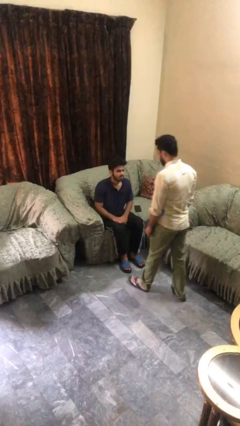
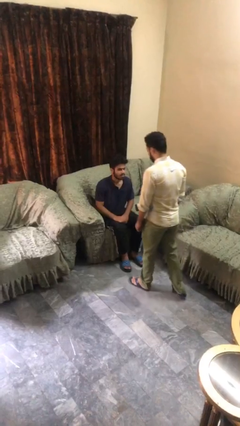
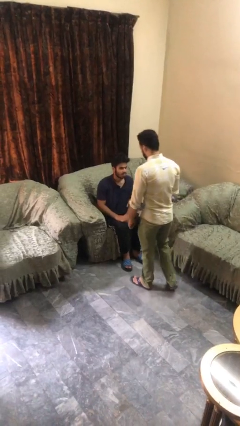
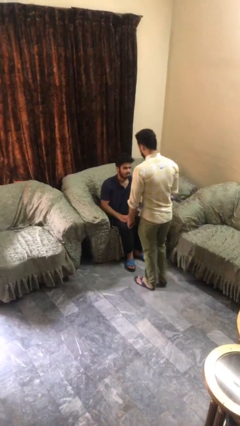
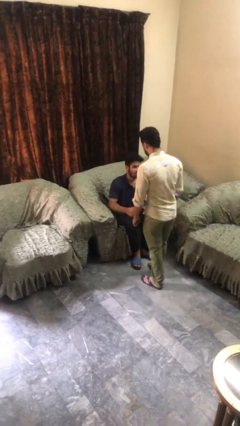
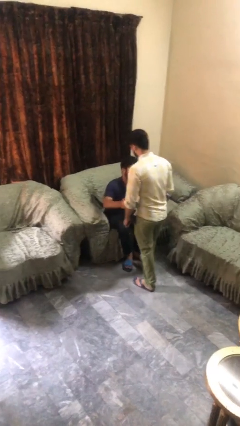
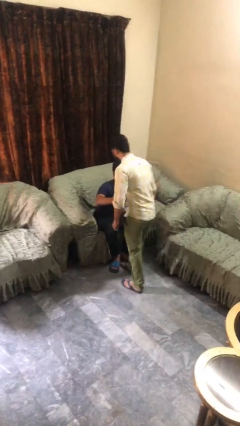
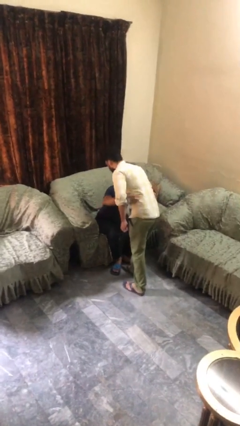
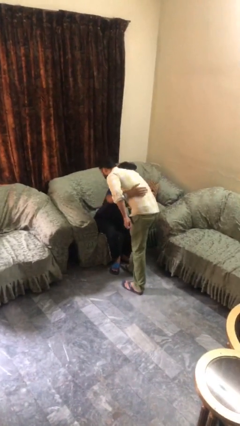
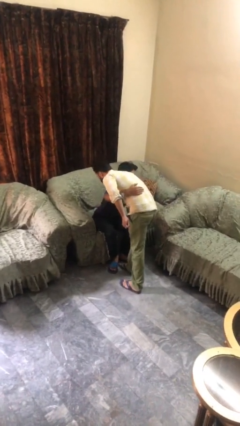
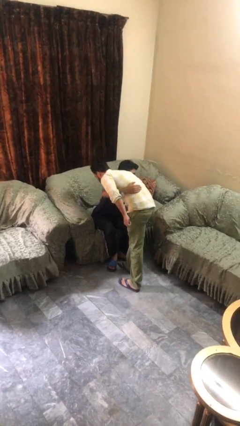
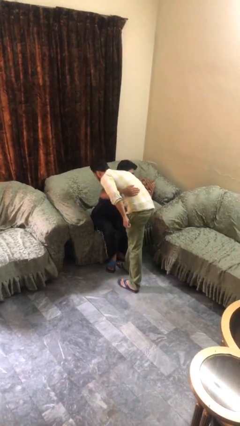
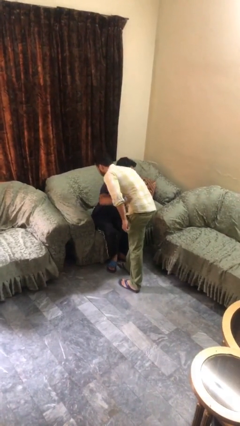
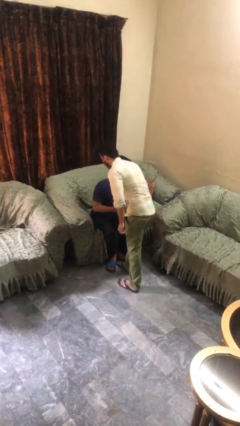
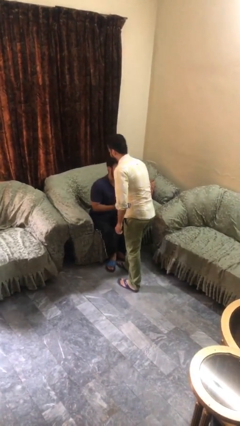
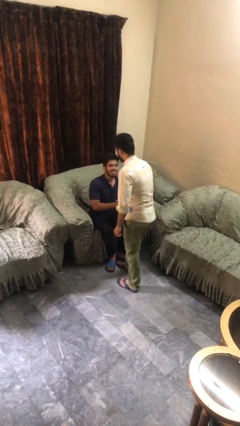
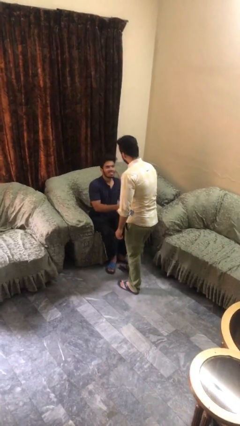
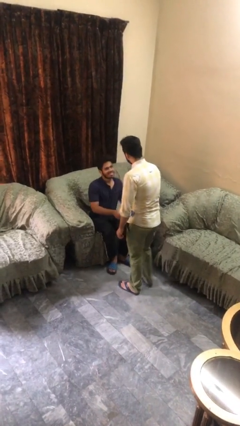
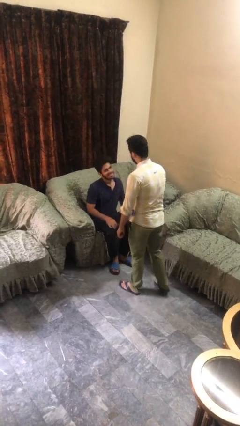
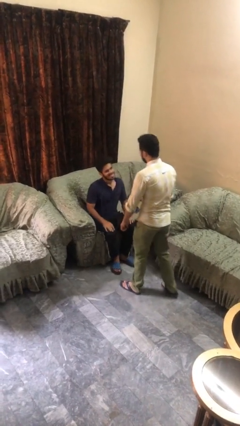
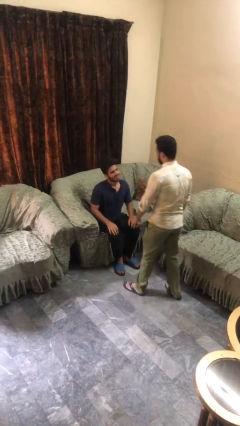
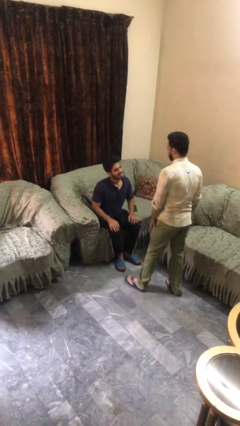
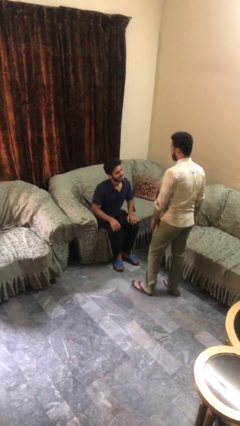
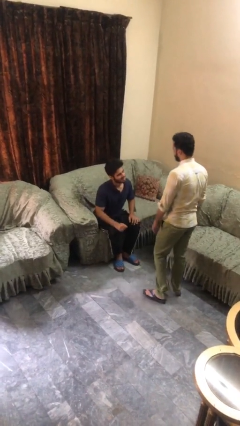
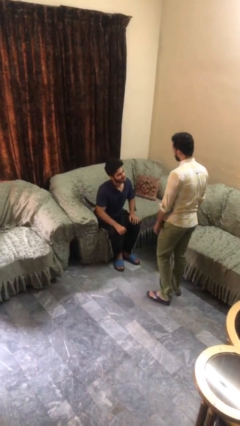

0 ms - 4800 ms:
person embraces person

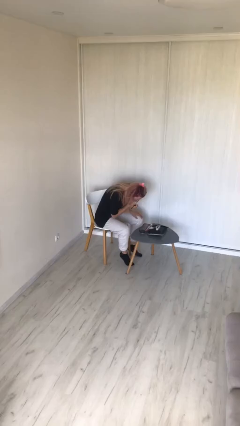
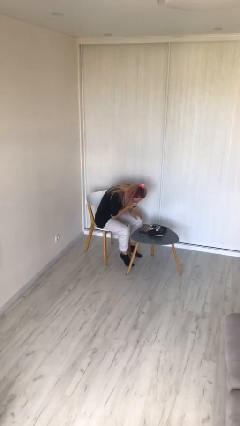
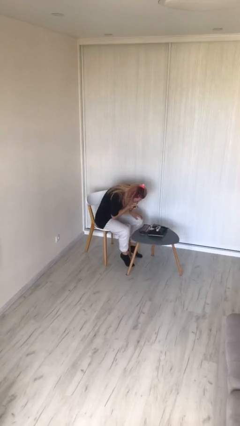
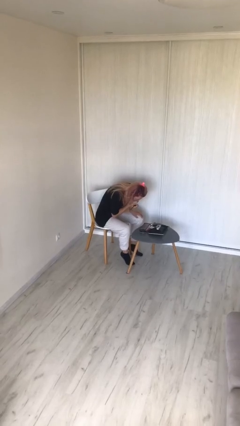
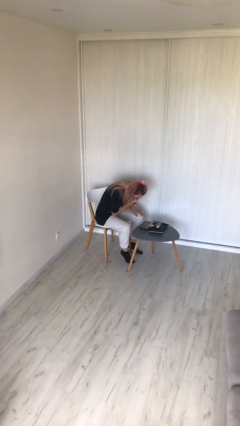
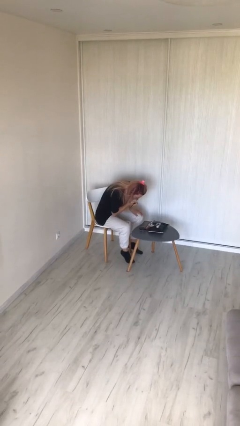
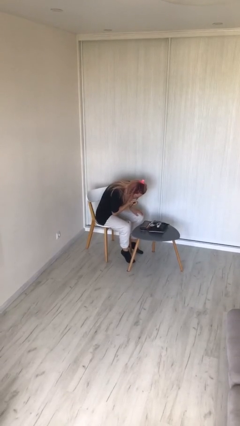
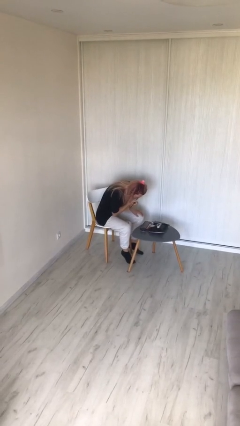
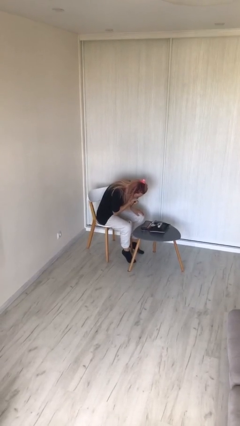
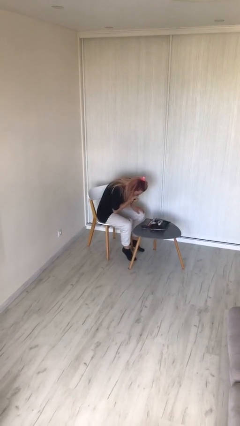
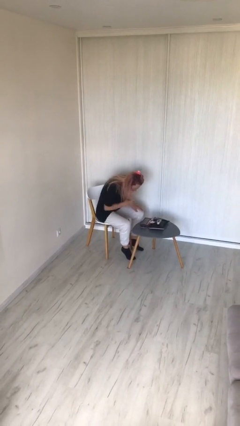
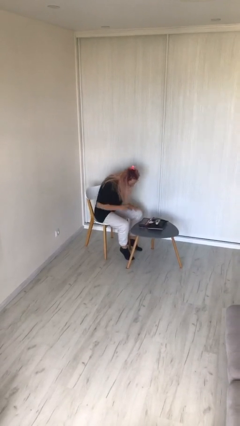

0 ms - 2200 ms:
person applies eye makeup

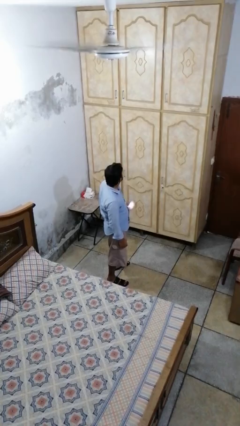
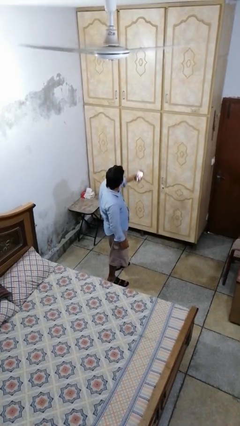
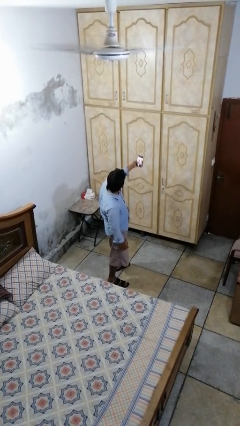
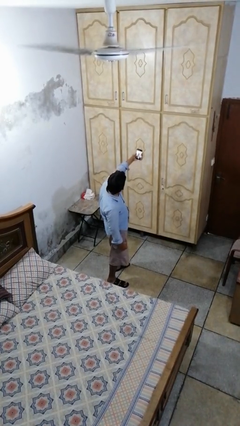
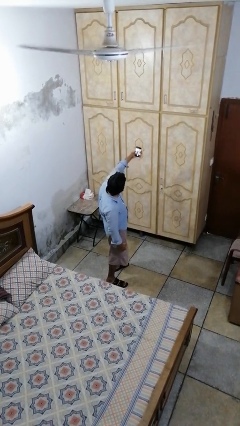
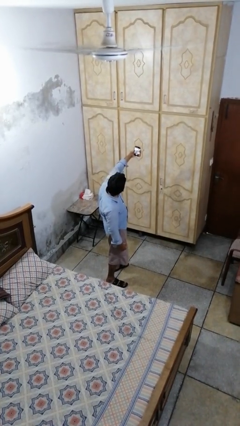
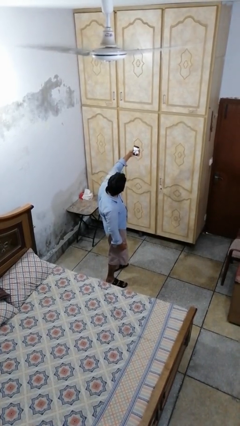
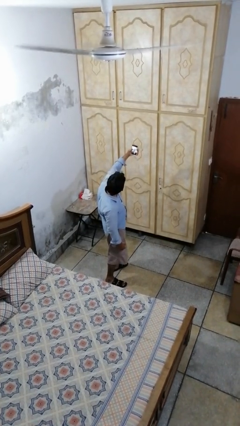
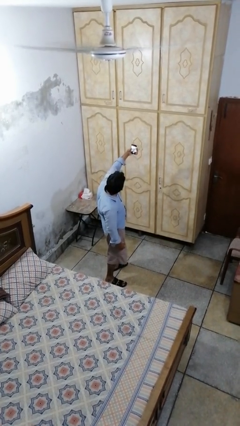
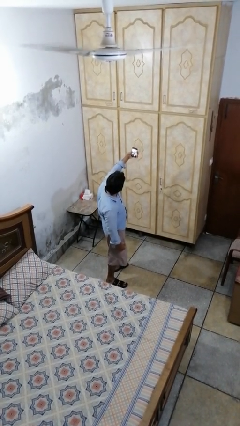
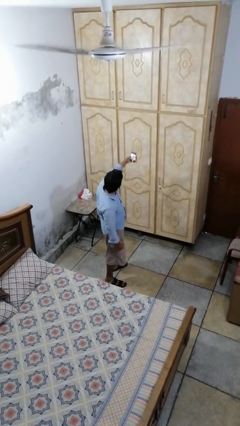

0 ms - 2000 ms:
person takes selfie

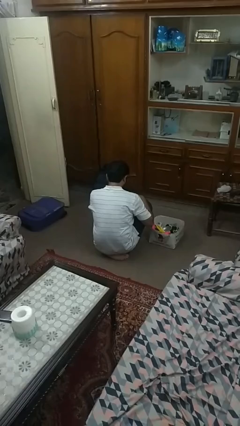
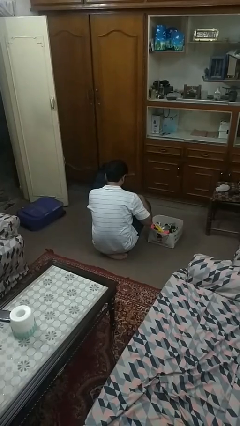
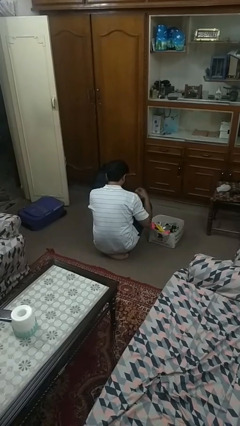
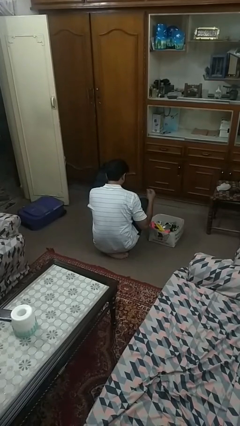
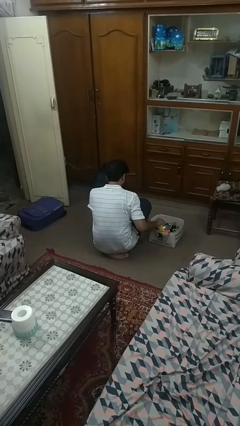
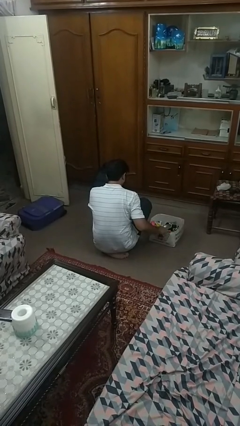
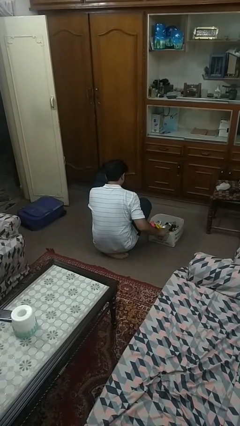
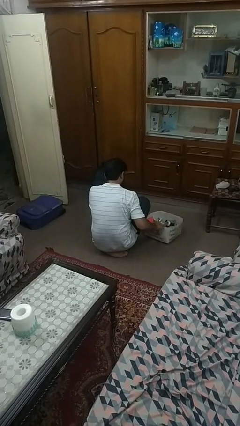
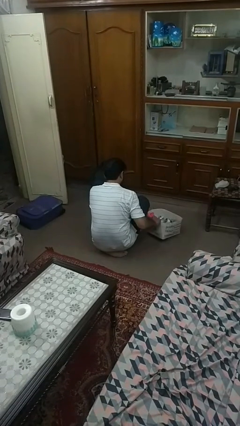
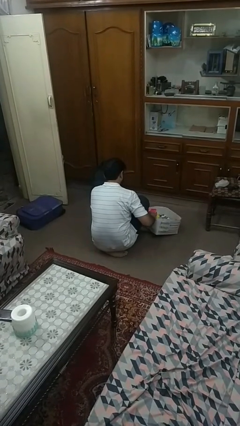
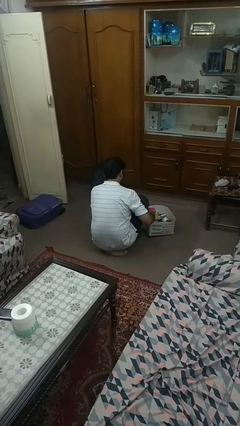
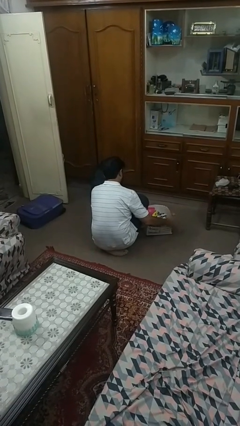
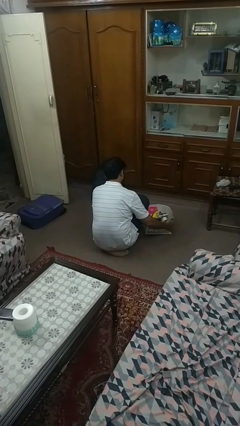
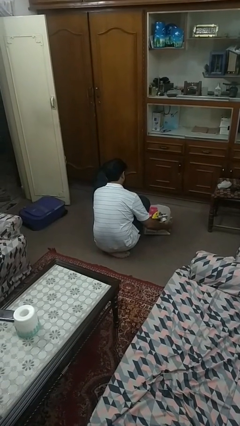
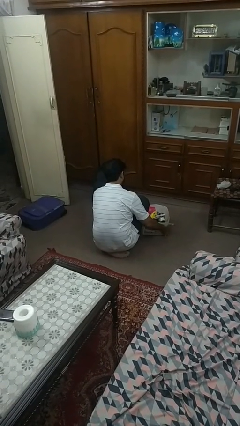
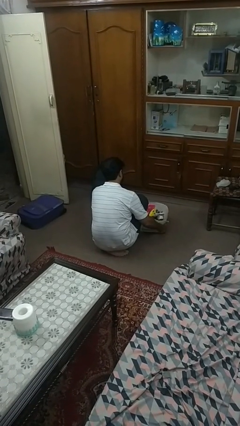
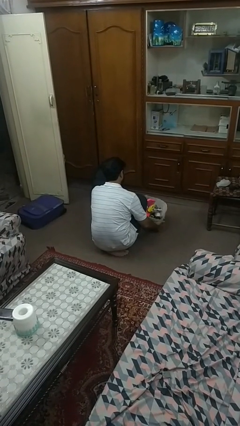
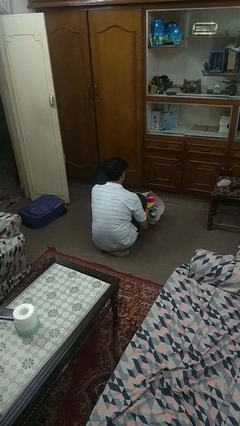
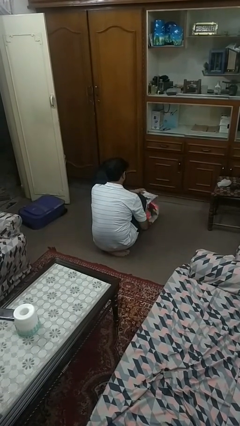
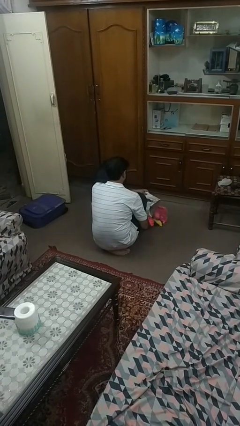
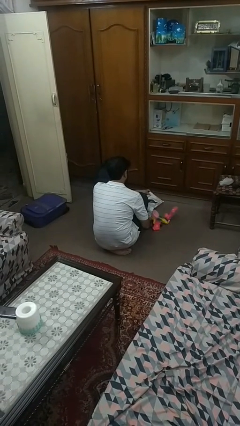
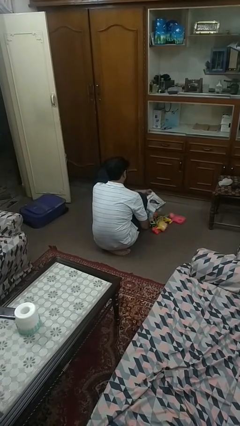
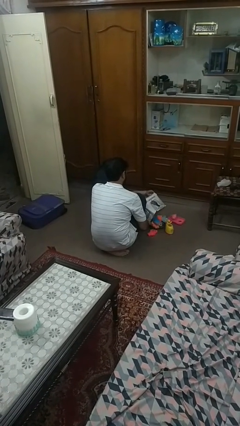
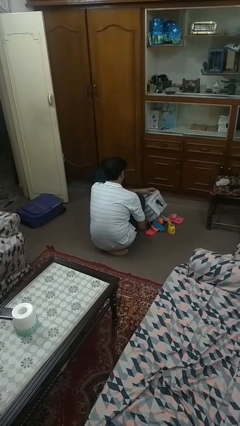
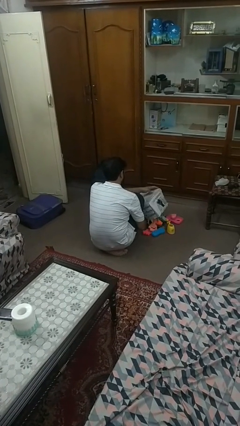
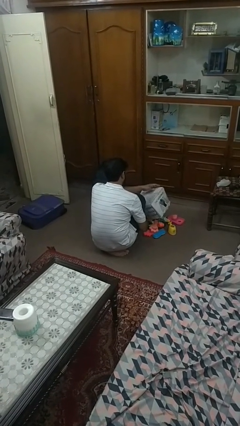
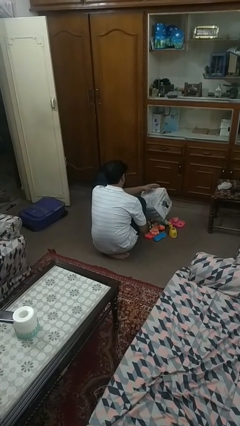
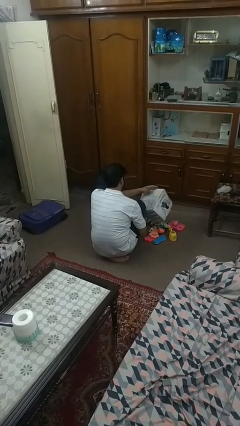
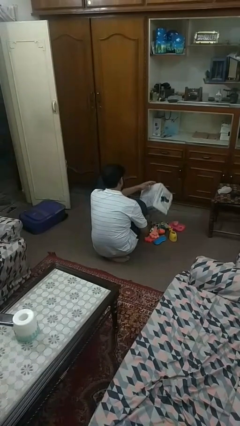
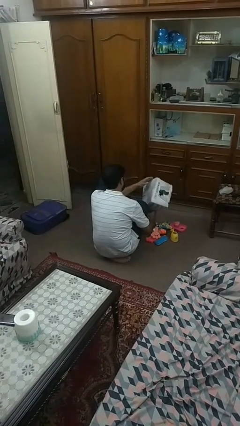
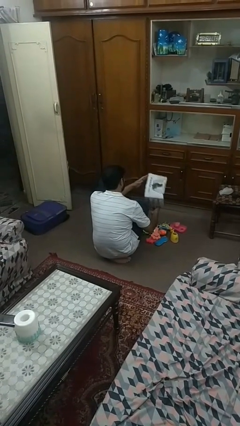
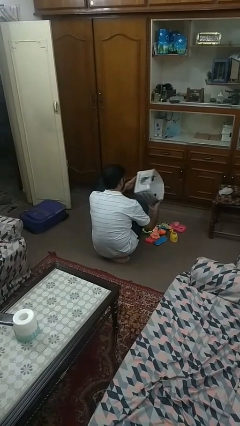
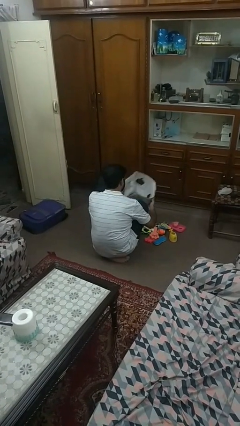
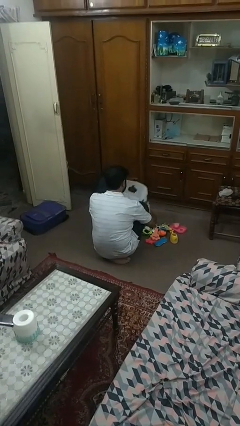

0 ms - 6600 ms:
person unloads box onto floor

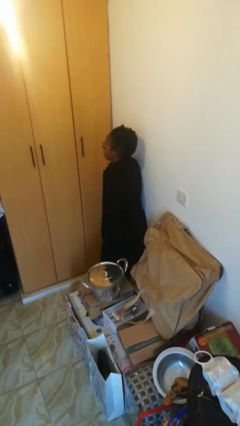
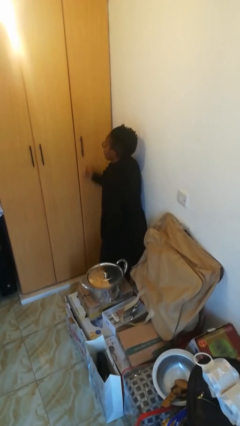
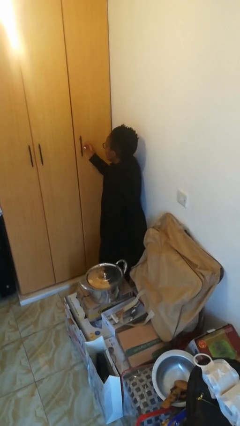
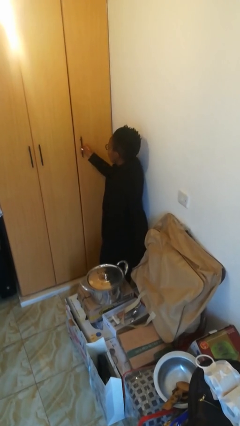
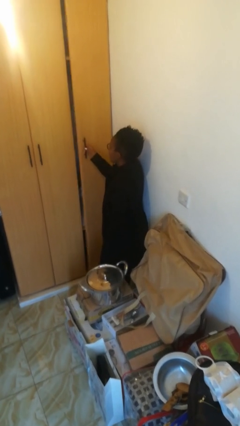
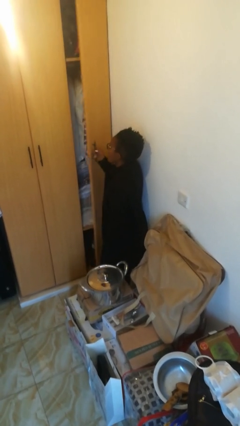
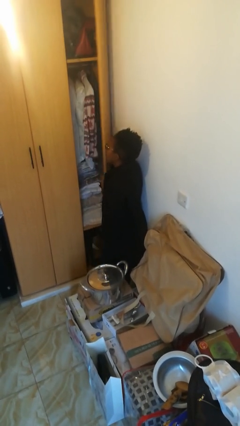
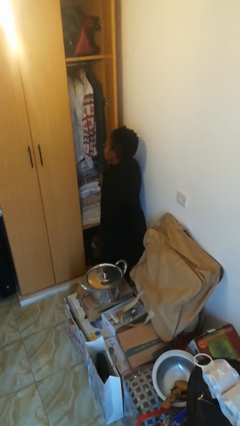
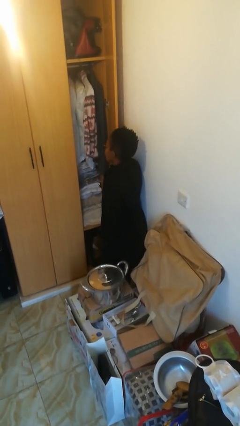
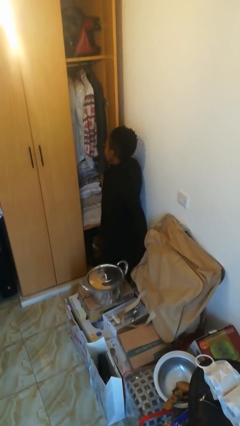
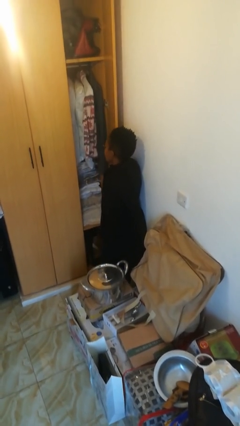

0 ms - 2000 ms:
person opens closet door
